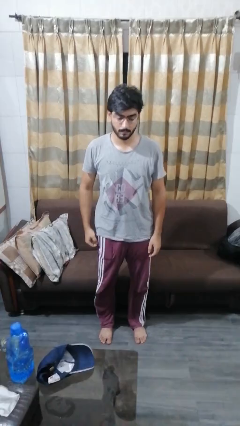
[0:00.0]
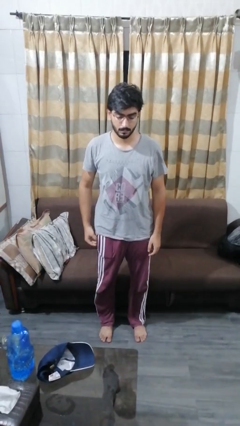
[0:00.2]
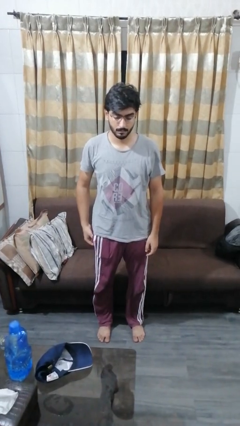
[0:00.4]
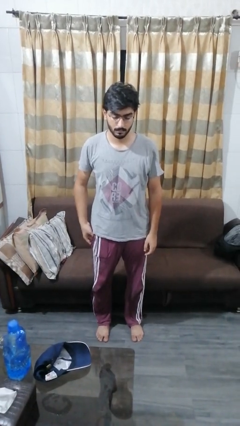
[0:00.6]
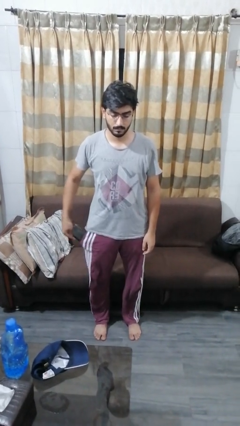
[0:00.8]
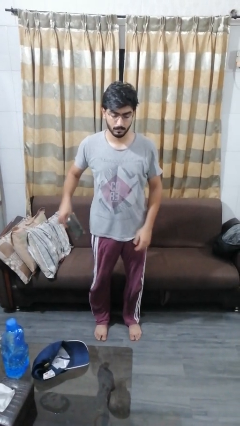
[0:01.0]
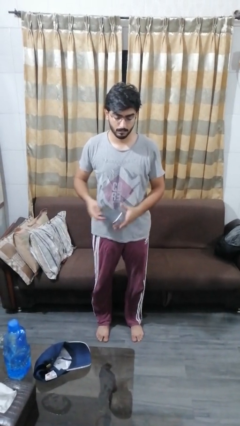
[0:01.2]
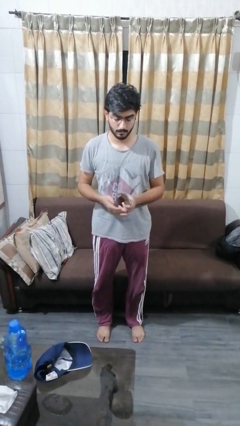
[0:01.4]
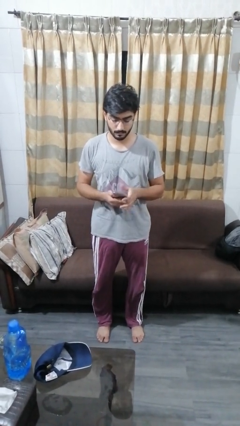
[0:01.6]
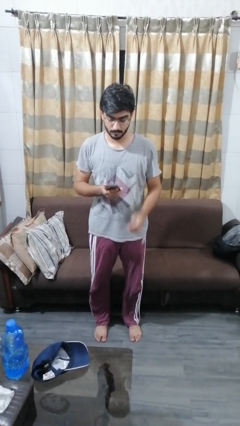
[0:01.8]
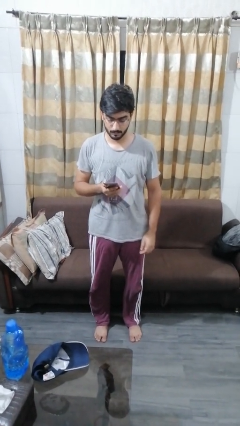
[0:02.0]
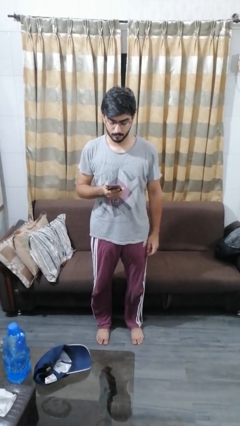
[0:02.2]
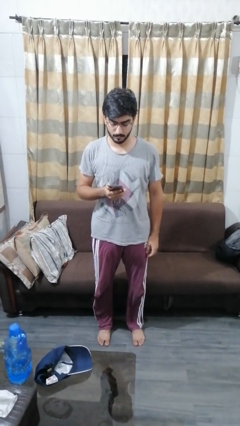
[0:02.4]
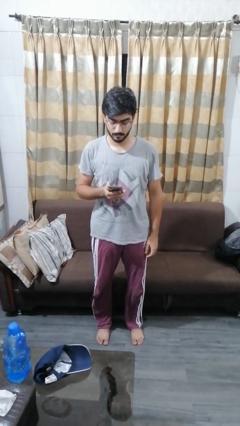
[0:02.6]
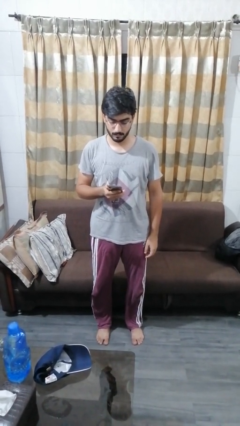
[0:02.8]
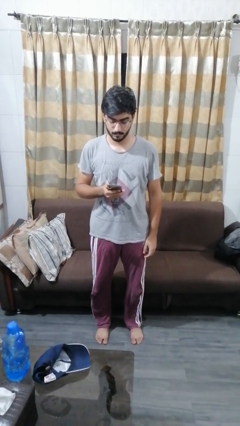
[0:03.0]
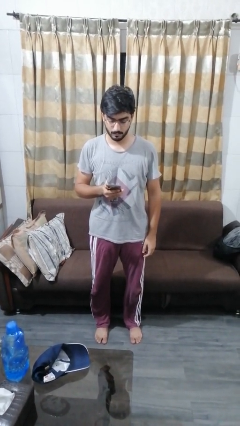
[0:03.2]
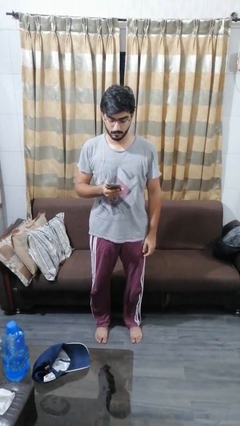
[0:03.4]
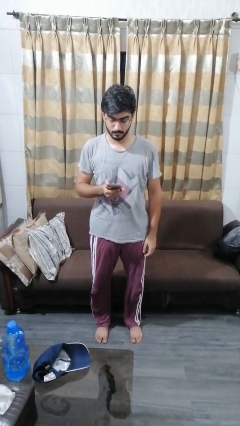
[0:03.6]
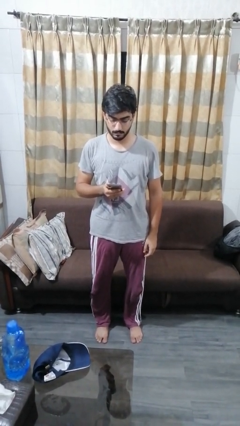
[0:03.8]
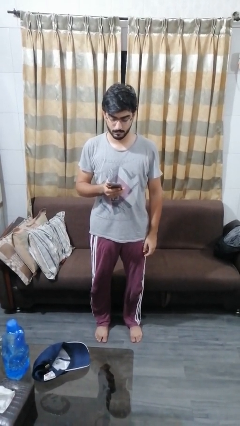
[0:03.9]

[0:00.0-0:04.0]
person takes phone from pocket

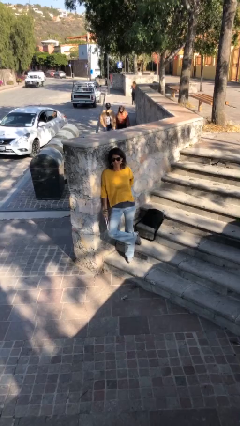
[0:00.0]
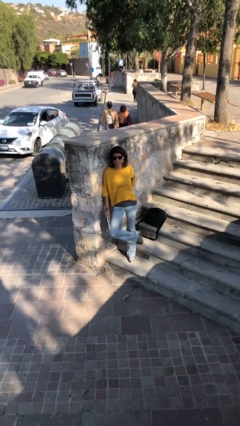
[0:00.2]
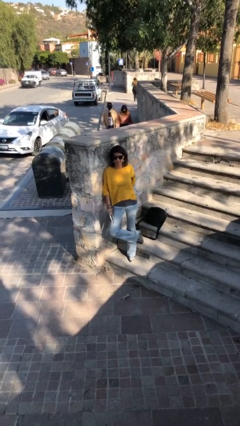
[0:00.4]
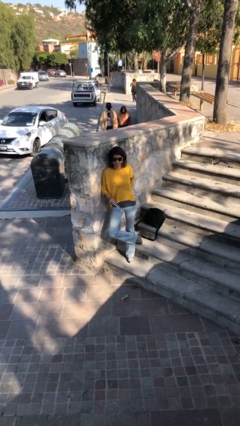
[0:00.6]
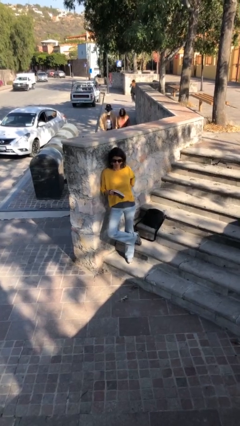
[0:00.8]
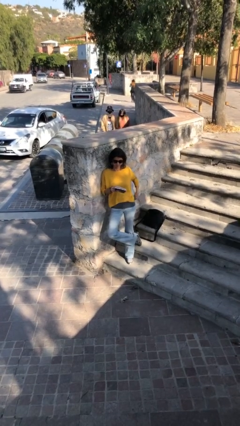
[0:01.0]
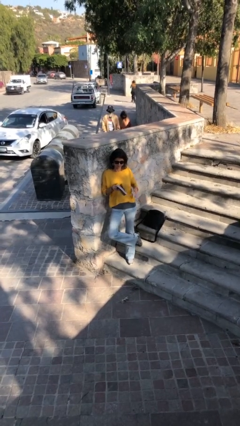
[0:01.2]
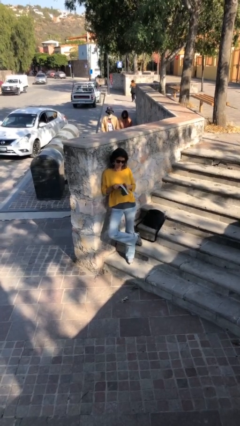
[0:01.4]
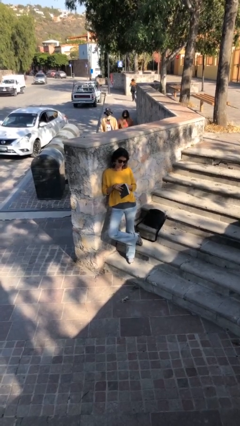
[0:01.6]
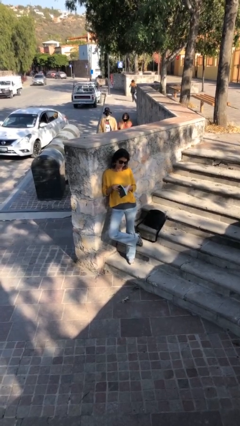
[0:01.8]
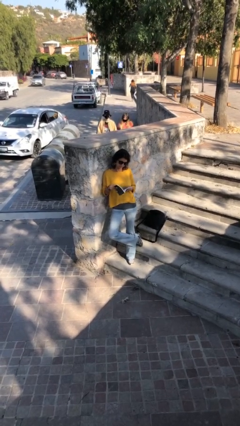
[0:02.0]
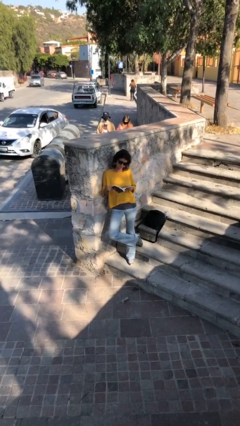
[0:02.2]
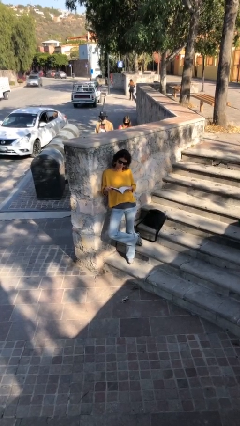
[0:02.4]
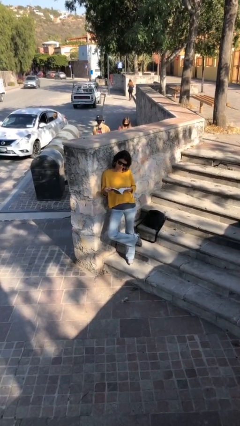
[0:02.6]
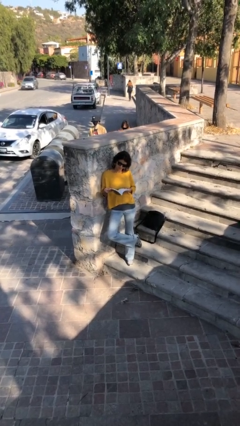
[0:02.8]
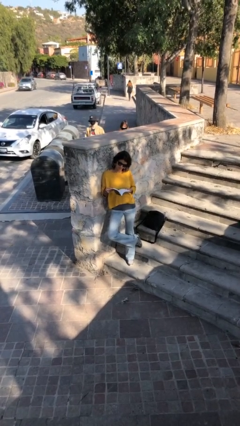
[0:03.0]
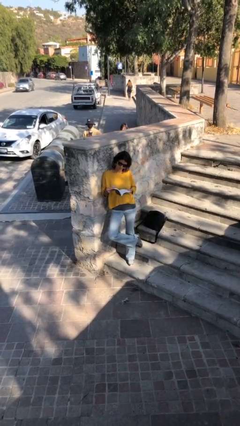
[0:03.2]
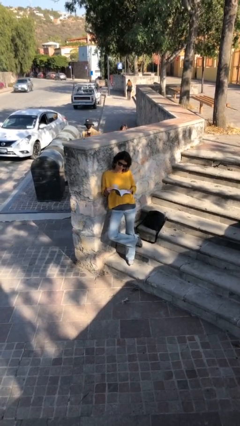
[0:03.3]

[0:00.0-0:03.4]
person reads document

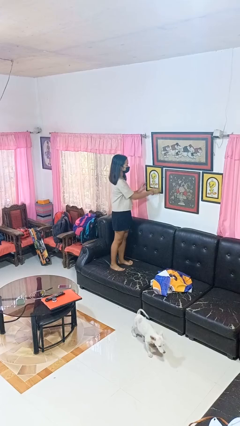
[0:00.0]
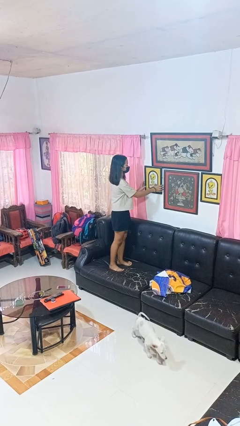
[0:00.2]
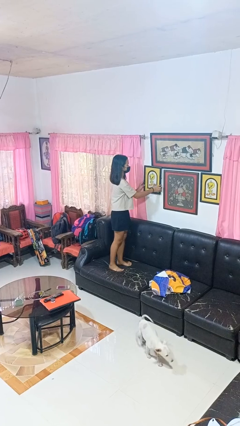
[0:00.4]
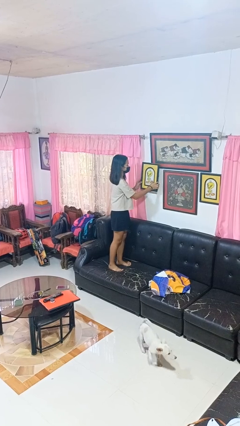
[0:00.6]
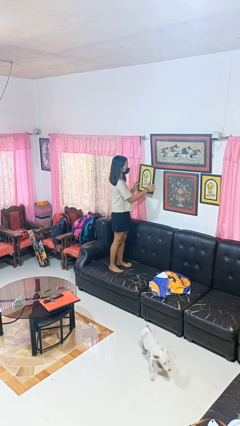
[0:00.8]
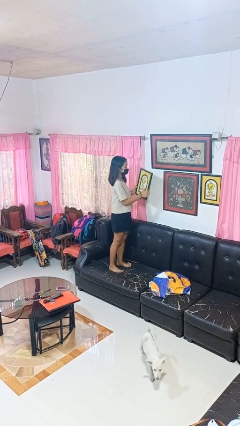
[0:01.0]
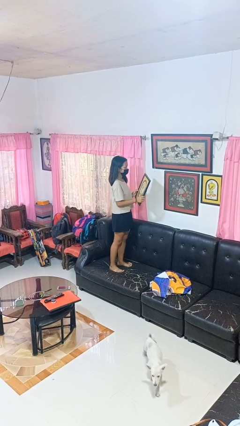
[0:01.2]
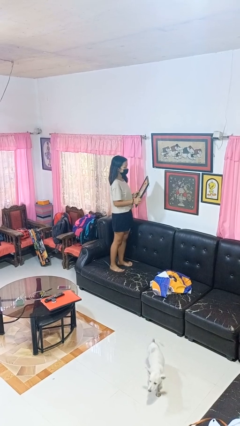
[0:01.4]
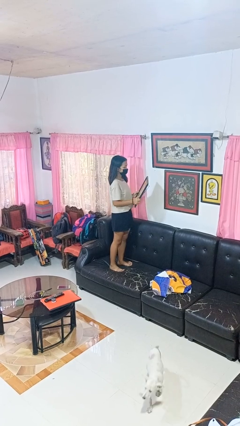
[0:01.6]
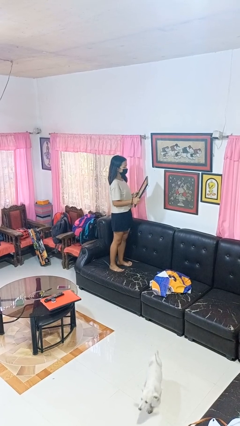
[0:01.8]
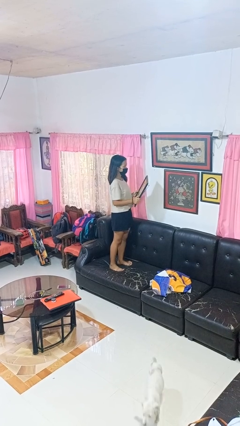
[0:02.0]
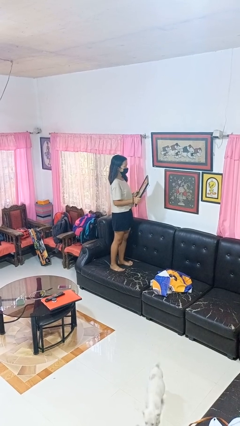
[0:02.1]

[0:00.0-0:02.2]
person takes down picture frame

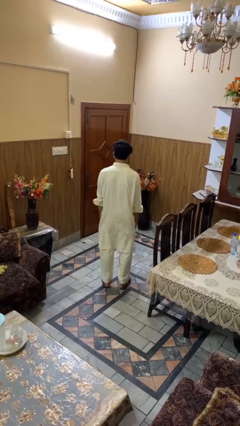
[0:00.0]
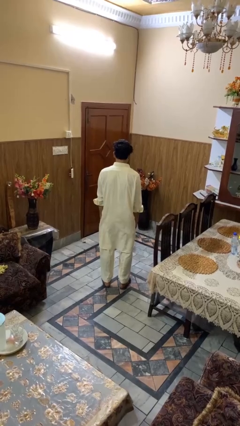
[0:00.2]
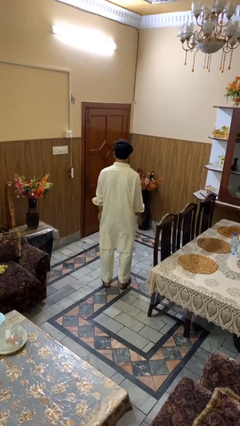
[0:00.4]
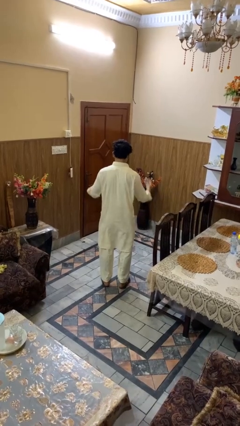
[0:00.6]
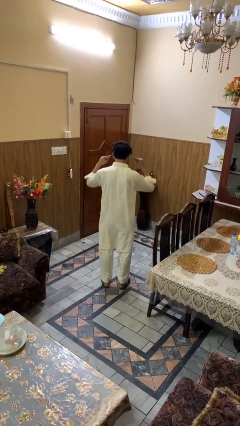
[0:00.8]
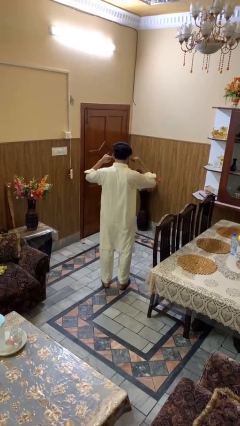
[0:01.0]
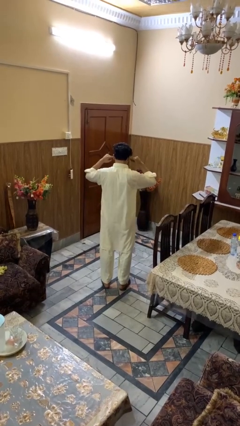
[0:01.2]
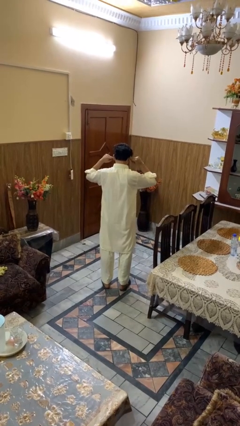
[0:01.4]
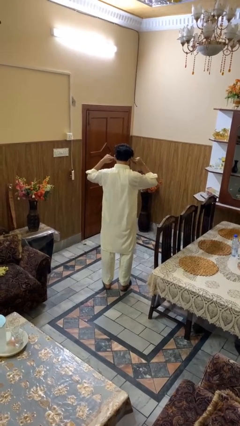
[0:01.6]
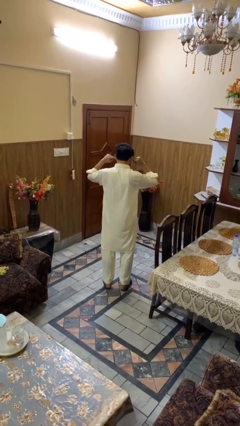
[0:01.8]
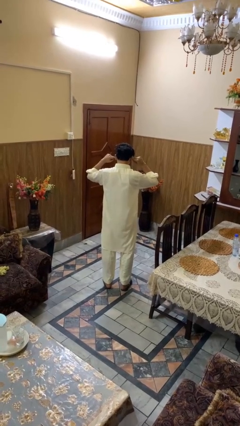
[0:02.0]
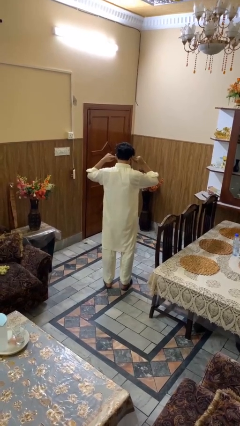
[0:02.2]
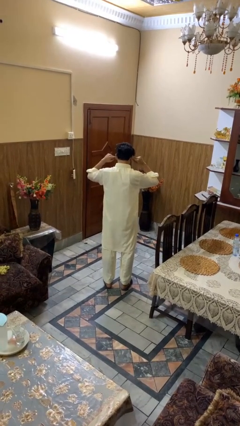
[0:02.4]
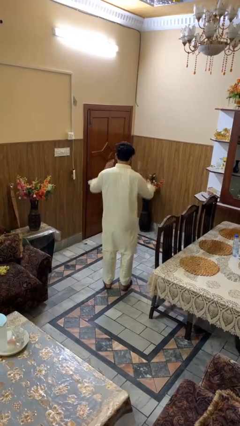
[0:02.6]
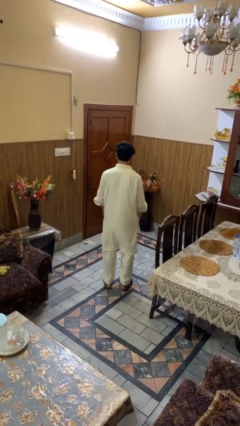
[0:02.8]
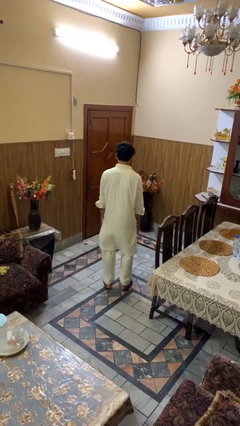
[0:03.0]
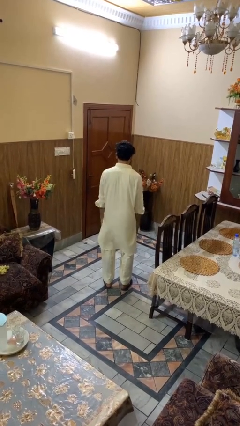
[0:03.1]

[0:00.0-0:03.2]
person puts fingers in ear

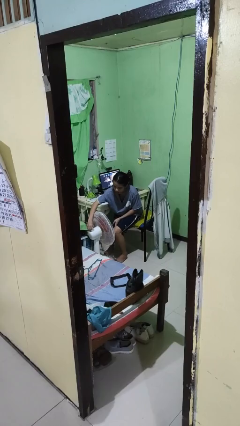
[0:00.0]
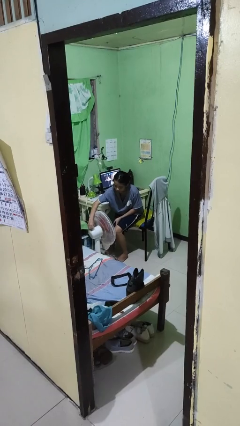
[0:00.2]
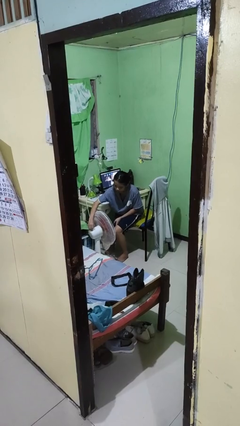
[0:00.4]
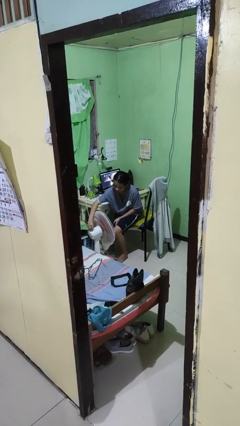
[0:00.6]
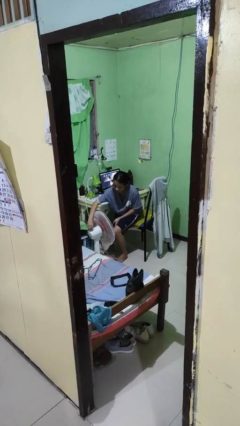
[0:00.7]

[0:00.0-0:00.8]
person turns off fan

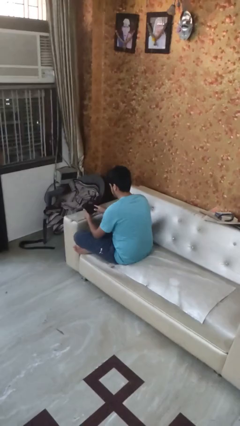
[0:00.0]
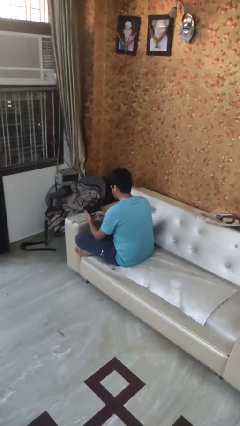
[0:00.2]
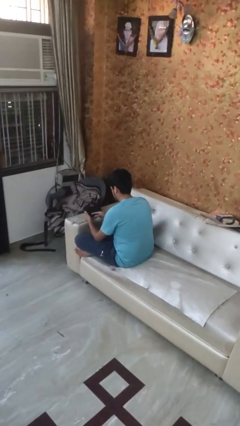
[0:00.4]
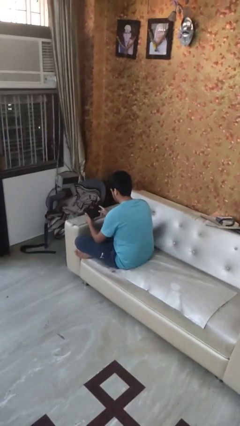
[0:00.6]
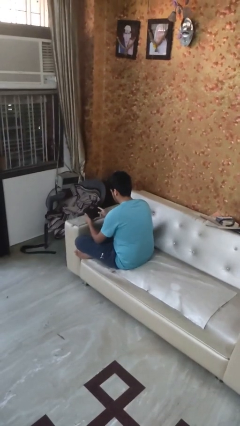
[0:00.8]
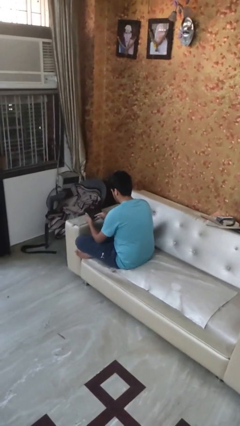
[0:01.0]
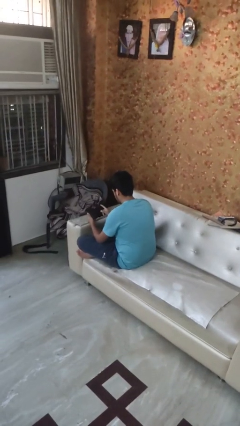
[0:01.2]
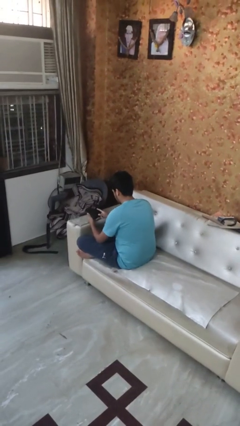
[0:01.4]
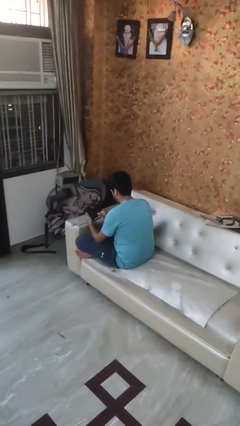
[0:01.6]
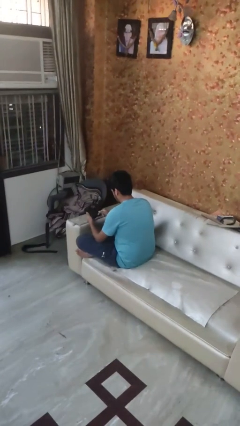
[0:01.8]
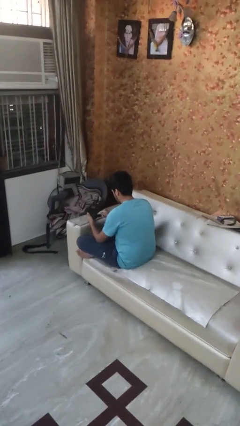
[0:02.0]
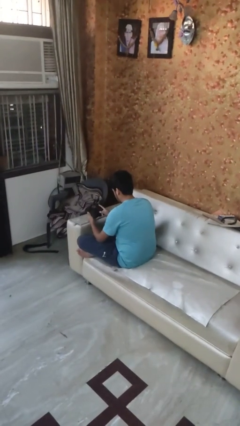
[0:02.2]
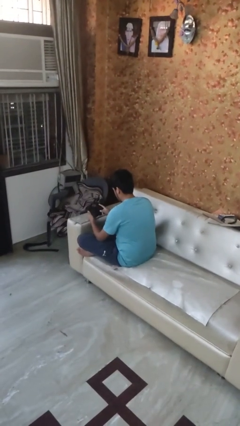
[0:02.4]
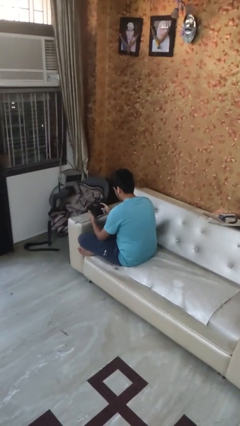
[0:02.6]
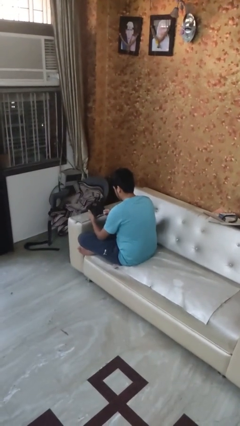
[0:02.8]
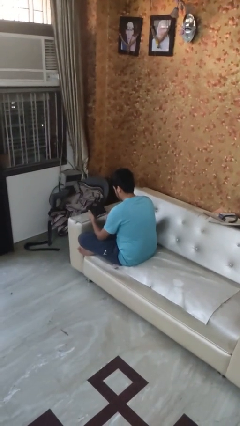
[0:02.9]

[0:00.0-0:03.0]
person interacts with tablet

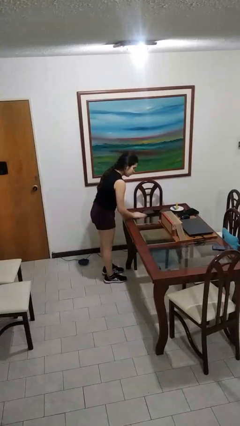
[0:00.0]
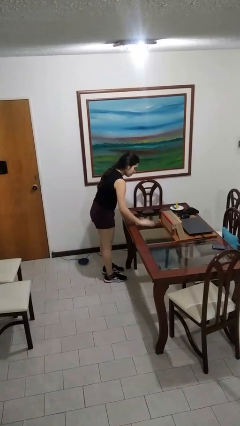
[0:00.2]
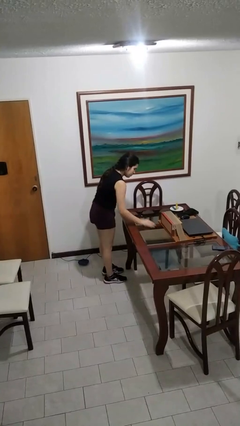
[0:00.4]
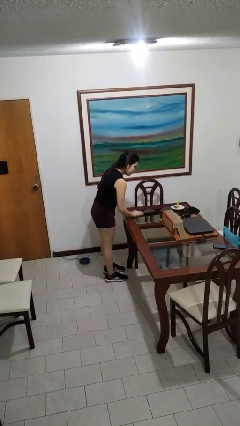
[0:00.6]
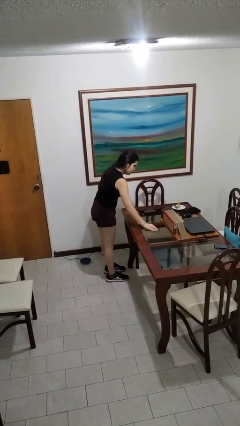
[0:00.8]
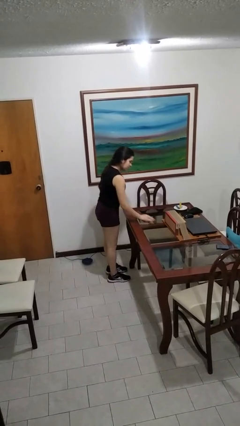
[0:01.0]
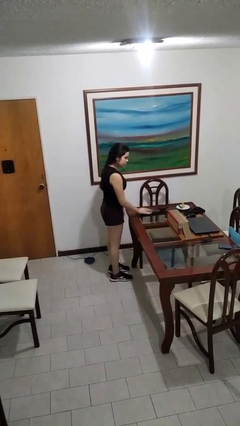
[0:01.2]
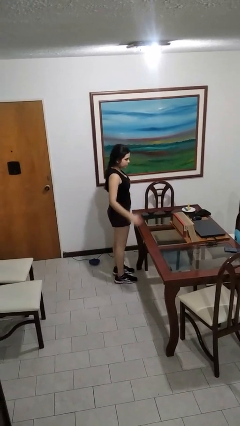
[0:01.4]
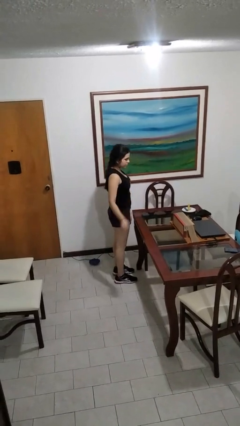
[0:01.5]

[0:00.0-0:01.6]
person cleans table with rag
